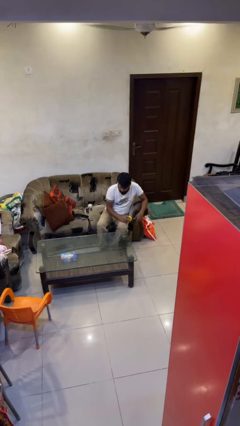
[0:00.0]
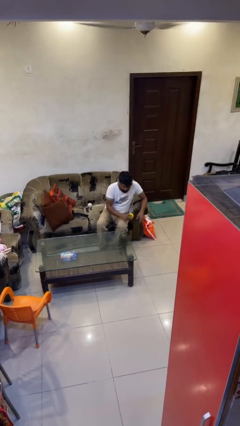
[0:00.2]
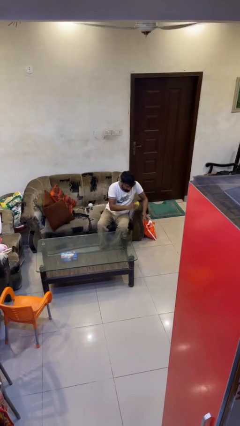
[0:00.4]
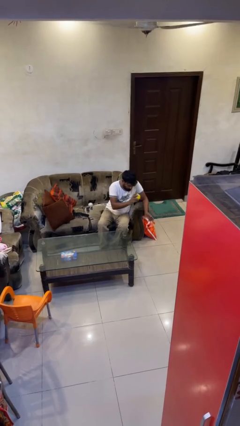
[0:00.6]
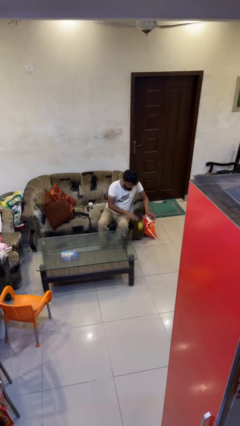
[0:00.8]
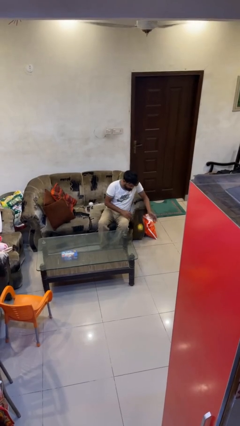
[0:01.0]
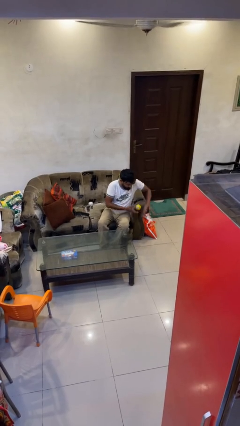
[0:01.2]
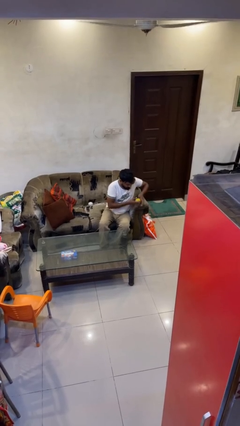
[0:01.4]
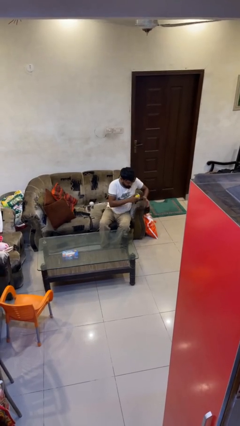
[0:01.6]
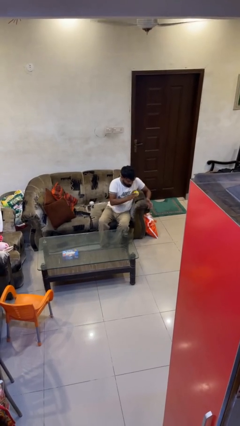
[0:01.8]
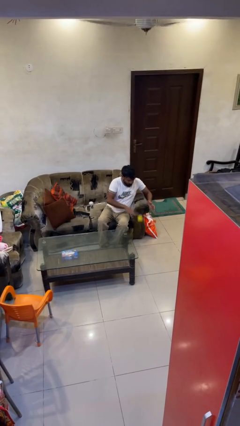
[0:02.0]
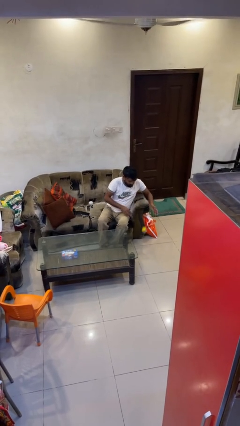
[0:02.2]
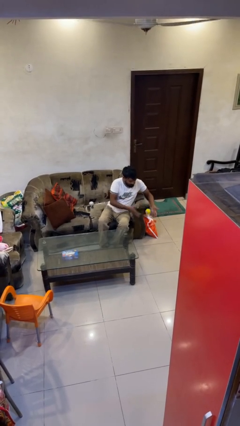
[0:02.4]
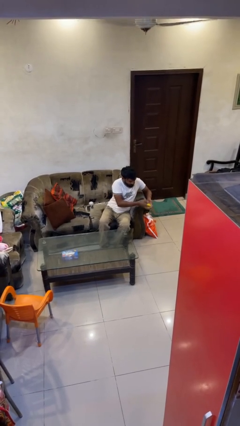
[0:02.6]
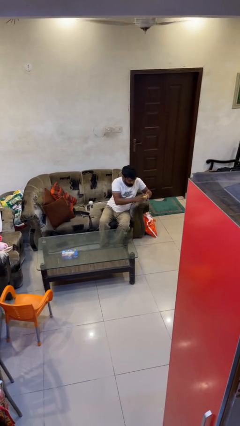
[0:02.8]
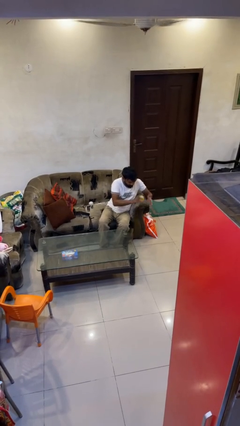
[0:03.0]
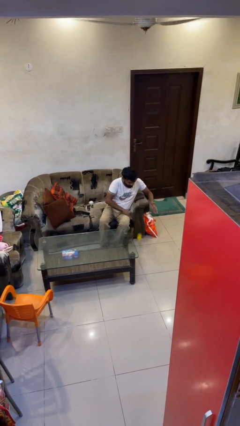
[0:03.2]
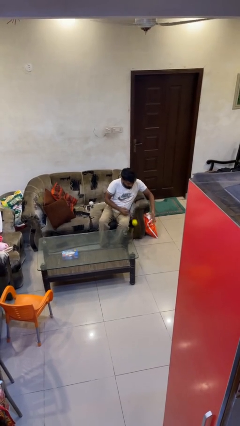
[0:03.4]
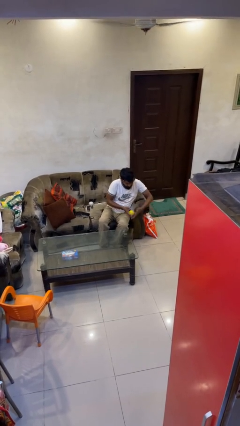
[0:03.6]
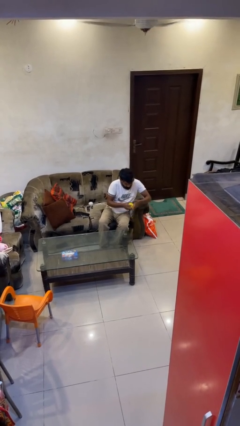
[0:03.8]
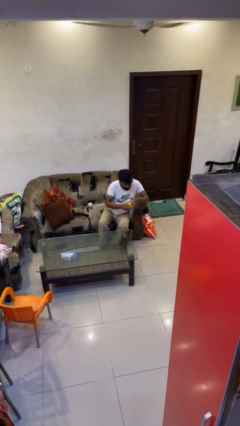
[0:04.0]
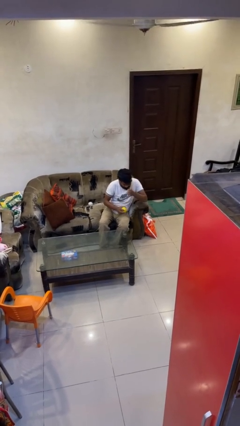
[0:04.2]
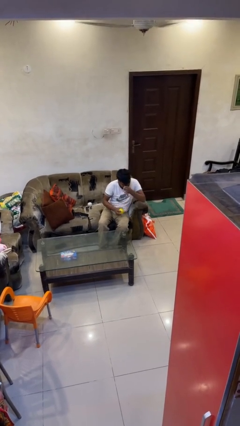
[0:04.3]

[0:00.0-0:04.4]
person bounces ball on floor

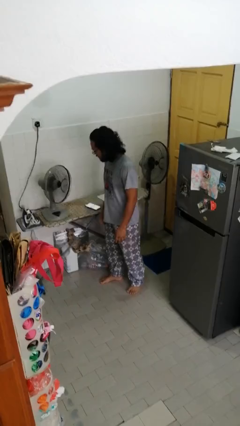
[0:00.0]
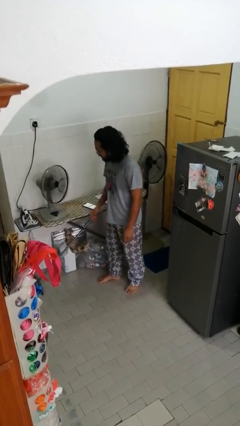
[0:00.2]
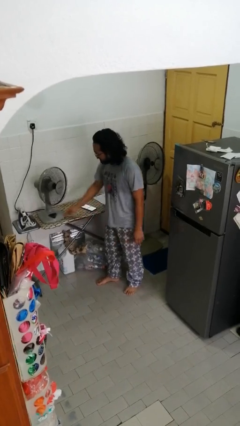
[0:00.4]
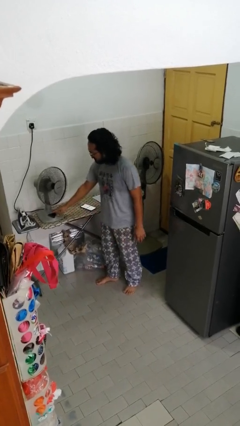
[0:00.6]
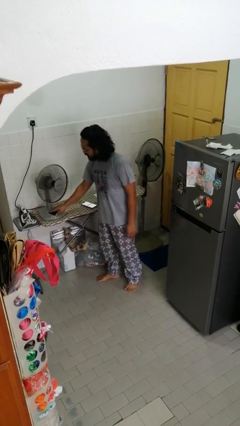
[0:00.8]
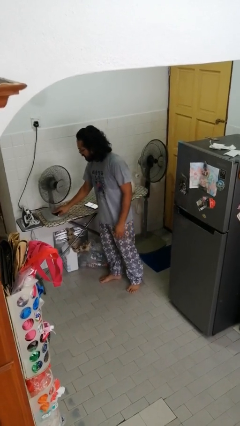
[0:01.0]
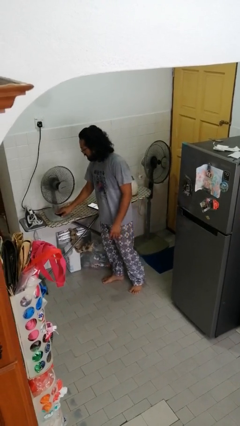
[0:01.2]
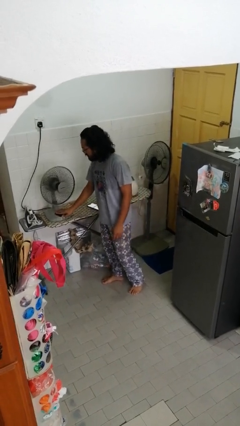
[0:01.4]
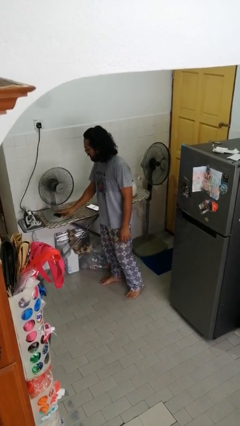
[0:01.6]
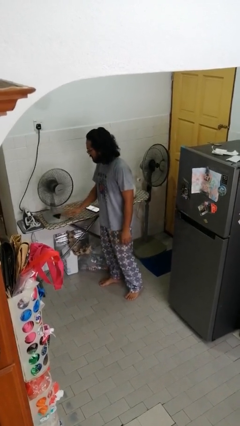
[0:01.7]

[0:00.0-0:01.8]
person turns off fan

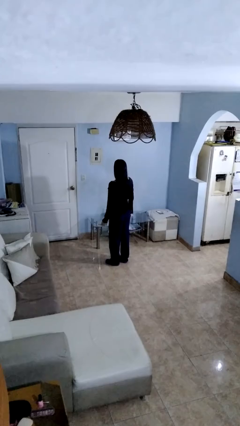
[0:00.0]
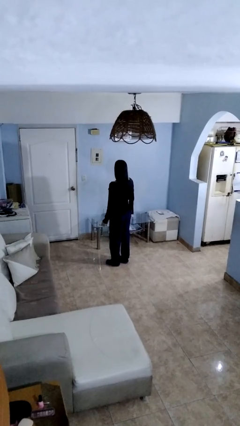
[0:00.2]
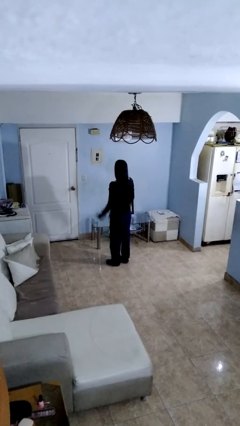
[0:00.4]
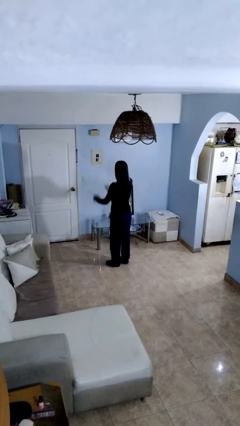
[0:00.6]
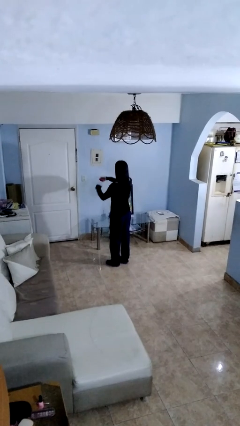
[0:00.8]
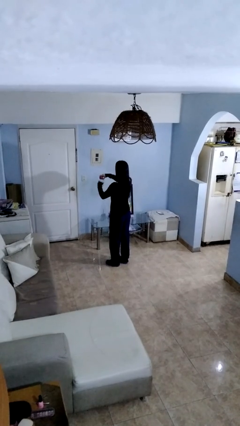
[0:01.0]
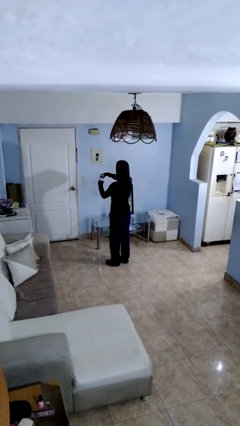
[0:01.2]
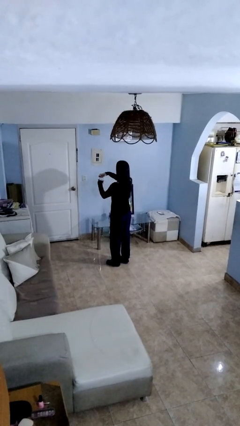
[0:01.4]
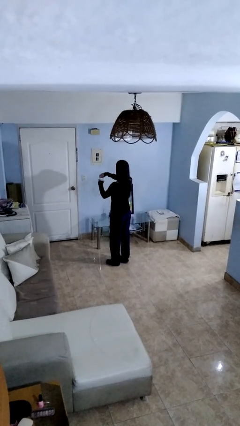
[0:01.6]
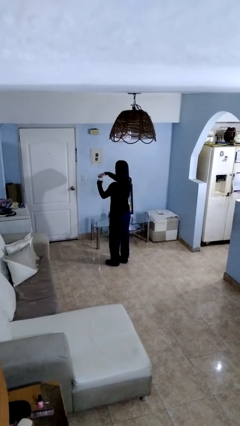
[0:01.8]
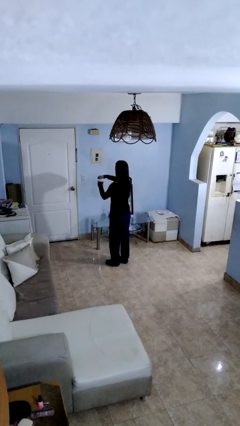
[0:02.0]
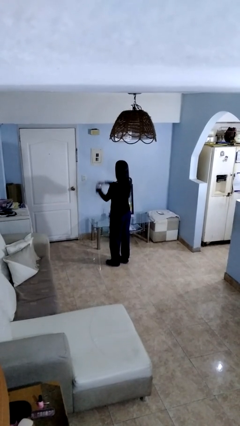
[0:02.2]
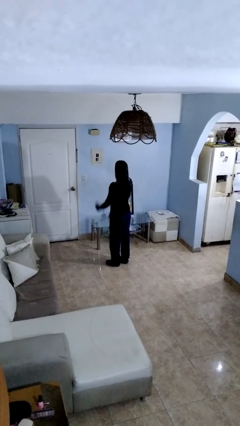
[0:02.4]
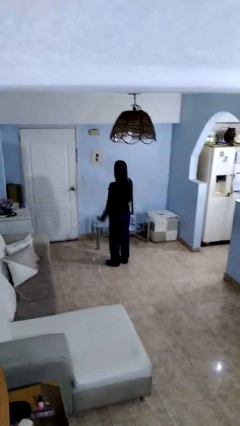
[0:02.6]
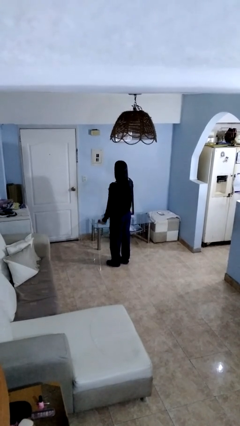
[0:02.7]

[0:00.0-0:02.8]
person closes jar

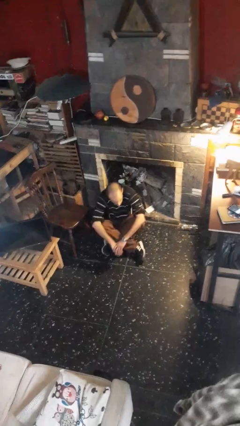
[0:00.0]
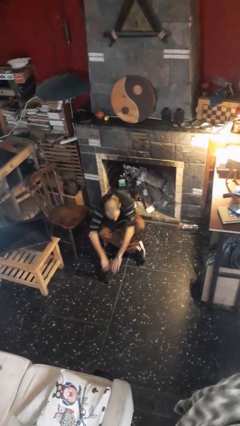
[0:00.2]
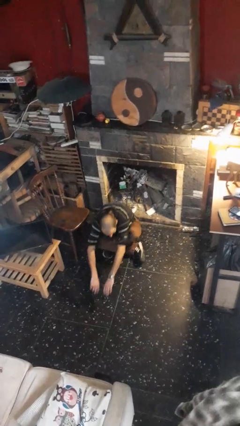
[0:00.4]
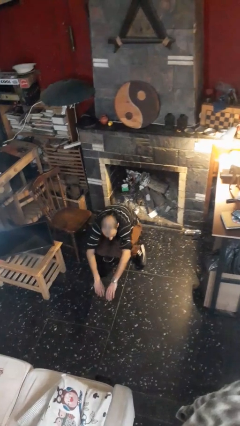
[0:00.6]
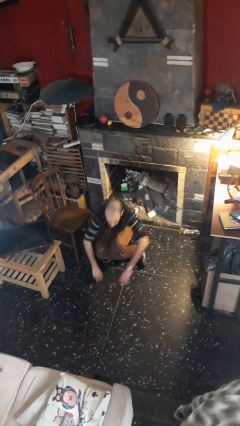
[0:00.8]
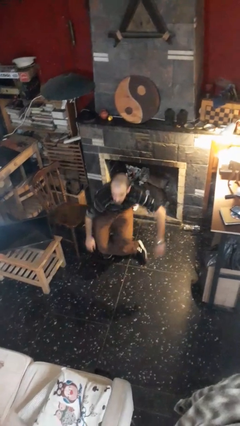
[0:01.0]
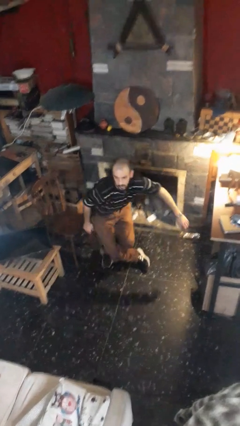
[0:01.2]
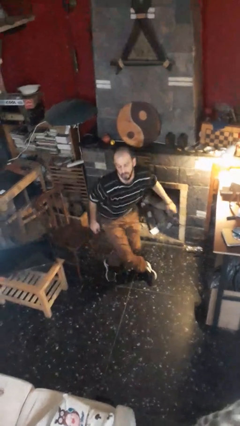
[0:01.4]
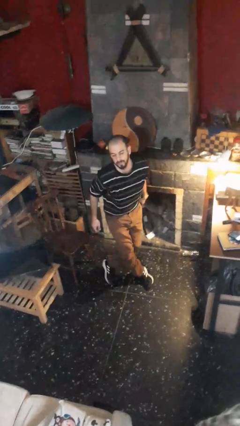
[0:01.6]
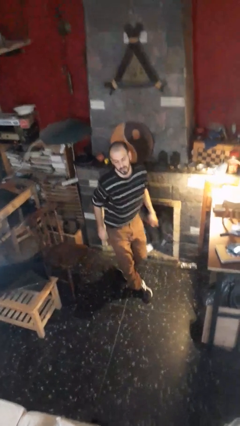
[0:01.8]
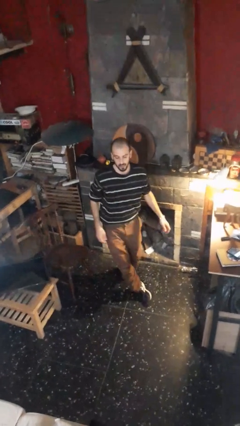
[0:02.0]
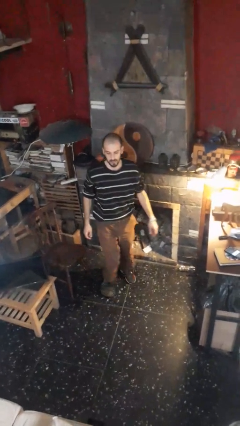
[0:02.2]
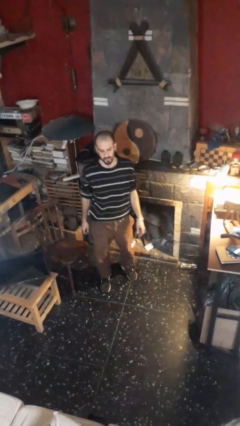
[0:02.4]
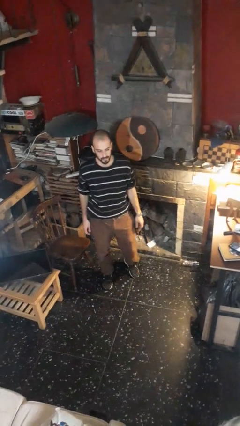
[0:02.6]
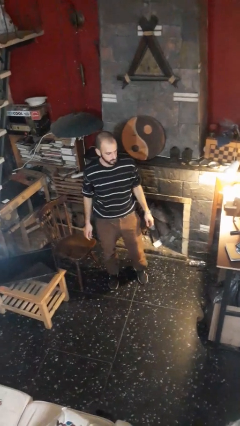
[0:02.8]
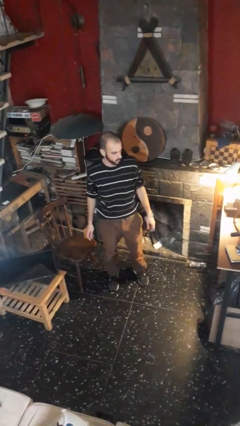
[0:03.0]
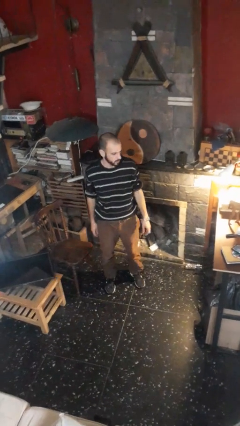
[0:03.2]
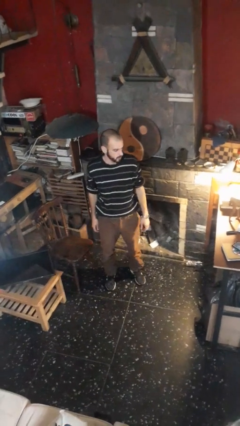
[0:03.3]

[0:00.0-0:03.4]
person stands up from floor

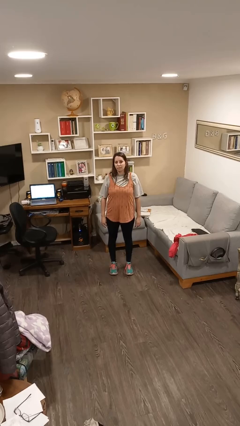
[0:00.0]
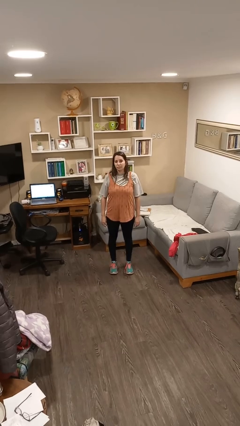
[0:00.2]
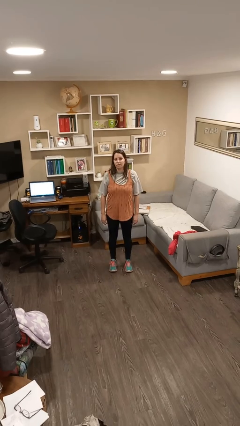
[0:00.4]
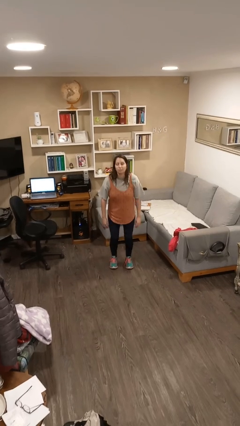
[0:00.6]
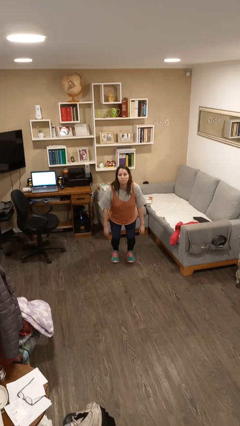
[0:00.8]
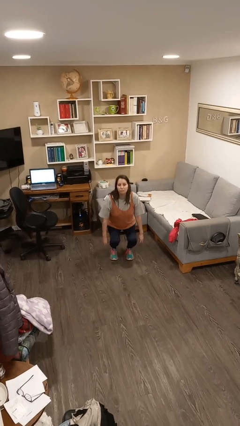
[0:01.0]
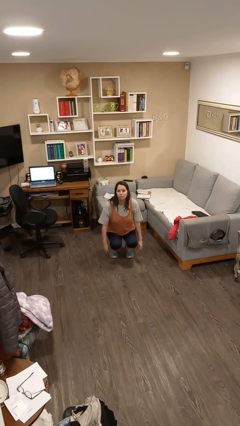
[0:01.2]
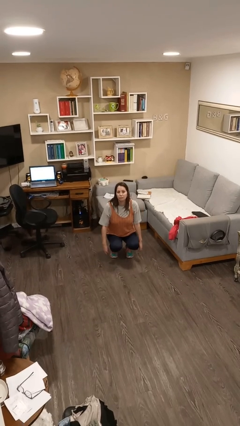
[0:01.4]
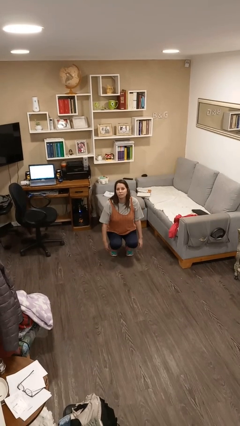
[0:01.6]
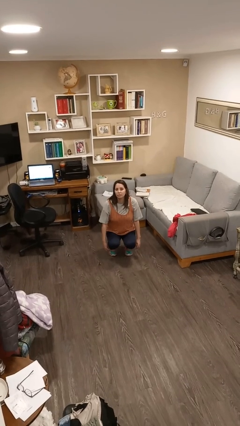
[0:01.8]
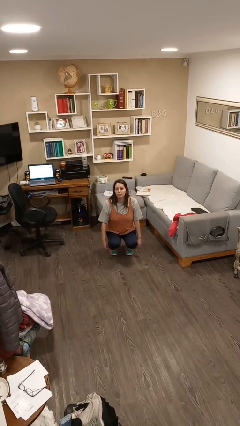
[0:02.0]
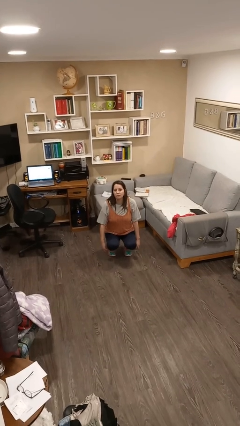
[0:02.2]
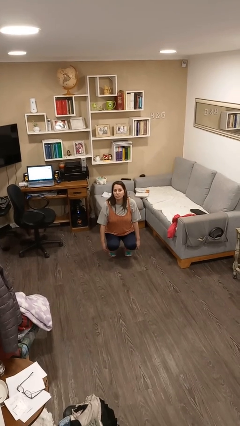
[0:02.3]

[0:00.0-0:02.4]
person squats

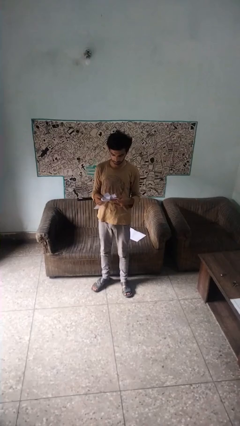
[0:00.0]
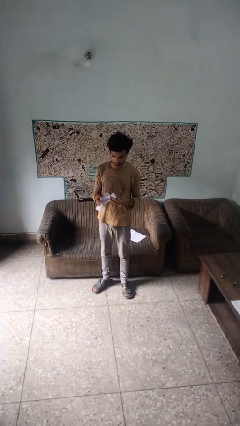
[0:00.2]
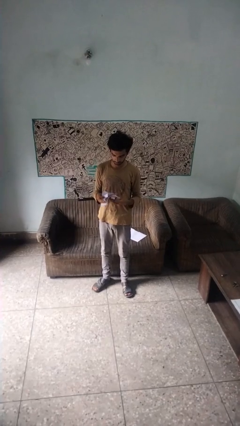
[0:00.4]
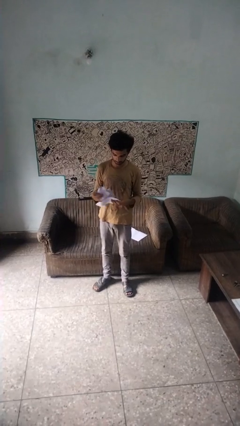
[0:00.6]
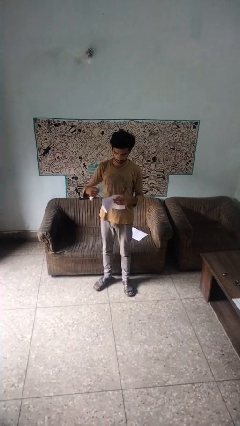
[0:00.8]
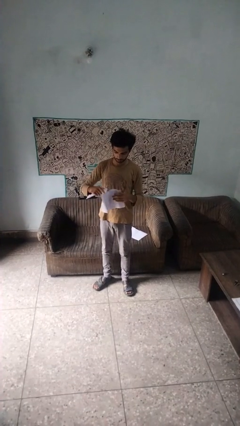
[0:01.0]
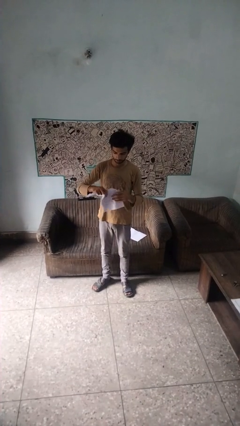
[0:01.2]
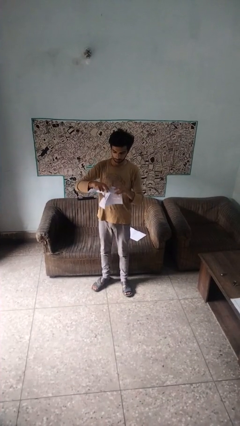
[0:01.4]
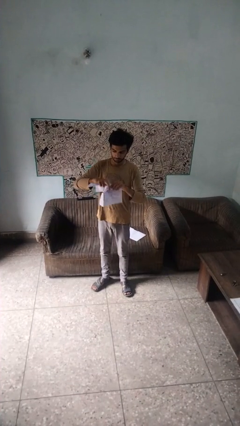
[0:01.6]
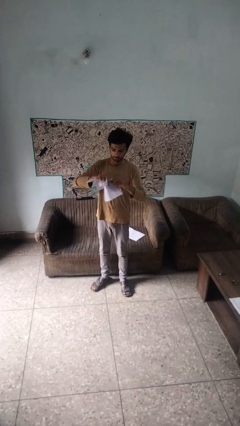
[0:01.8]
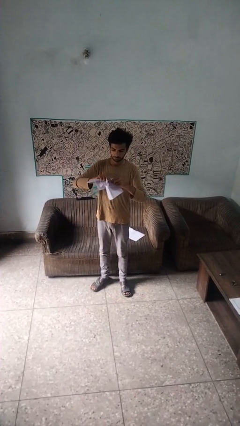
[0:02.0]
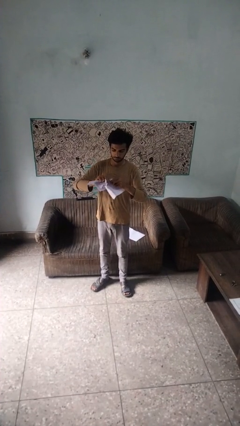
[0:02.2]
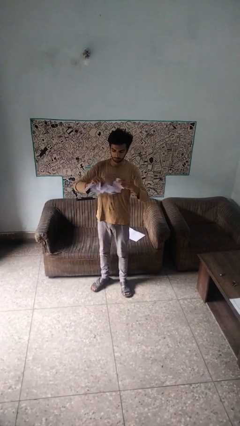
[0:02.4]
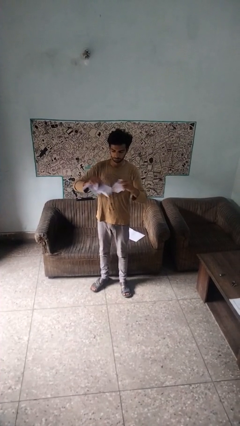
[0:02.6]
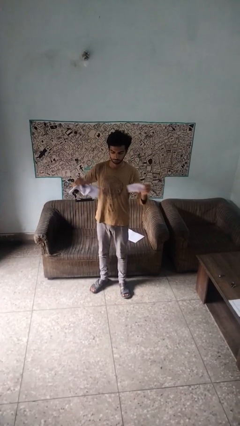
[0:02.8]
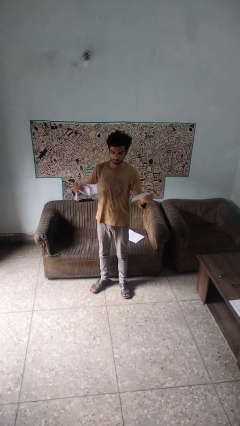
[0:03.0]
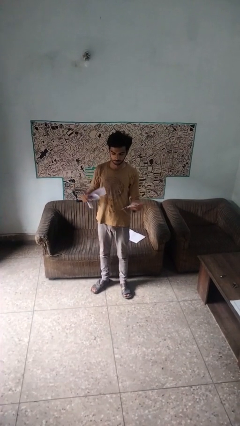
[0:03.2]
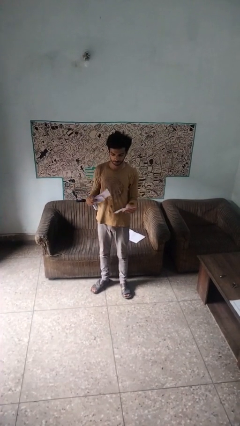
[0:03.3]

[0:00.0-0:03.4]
person tears paper
